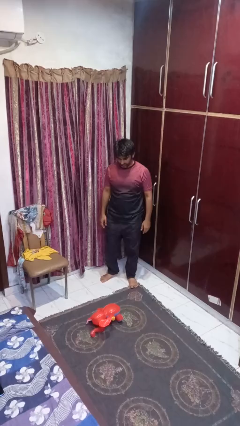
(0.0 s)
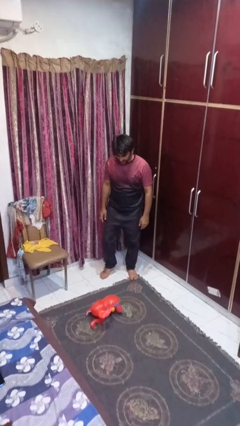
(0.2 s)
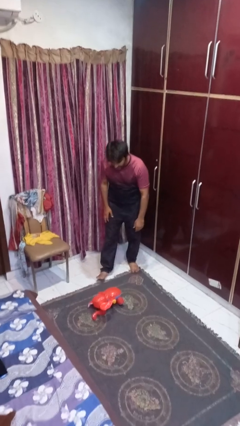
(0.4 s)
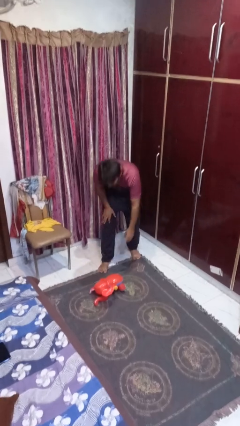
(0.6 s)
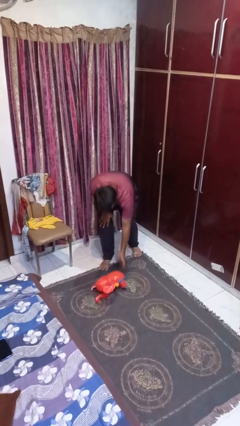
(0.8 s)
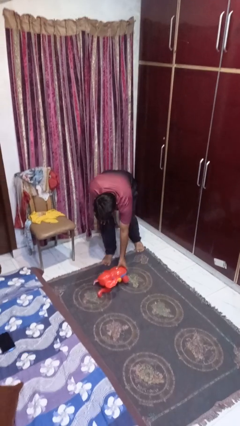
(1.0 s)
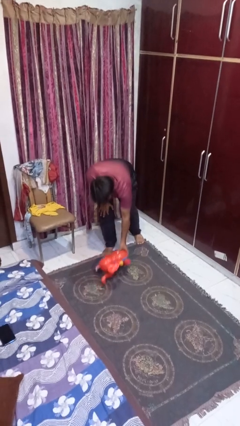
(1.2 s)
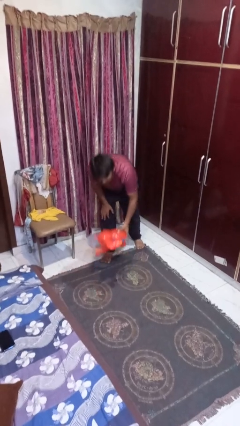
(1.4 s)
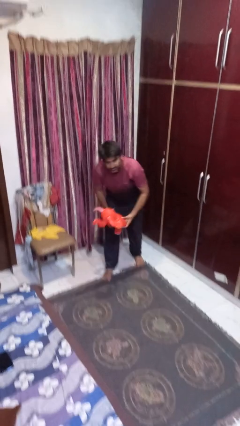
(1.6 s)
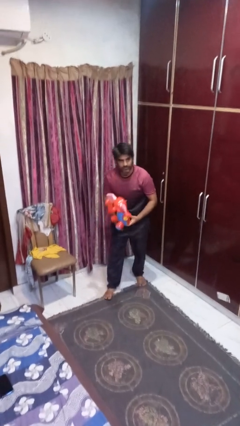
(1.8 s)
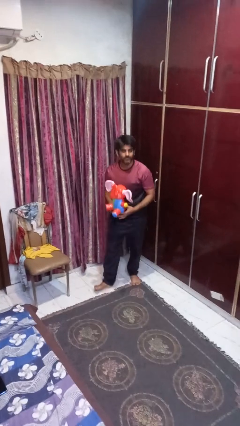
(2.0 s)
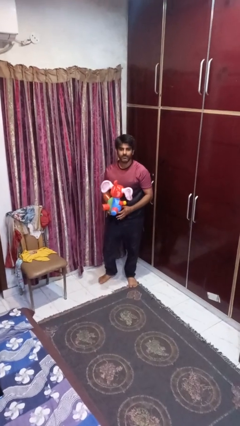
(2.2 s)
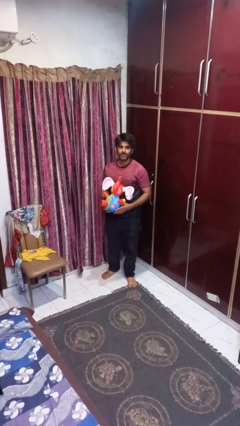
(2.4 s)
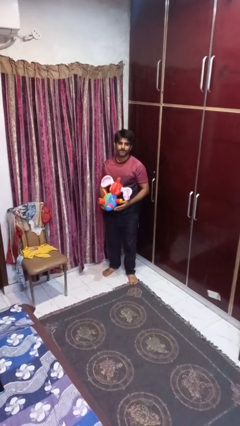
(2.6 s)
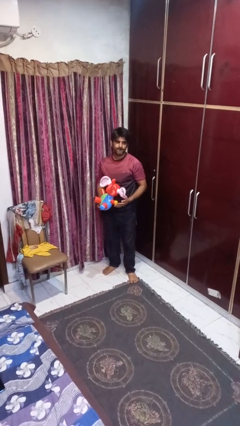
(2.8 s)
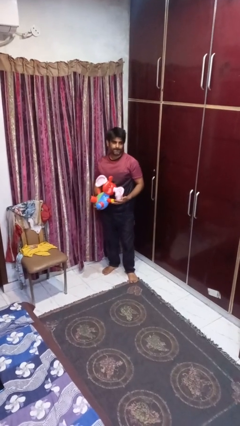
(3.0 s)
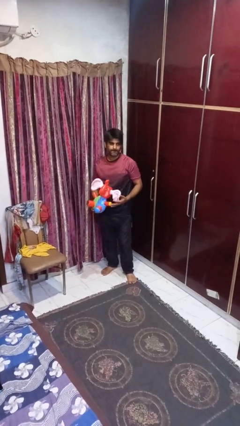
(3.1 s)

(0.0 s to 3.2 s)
person picks up object from floor

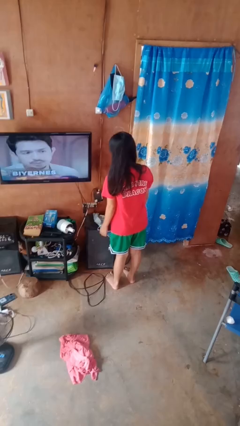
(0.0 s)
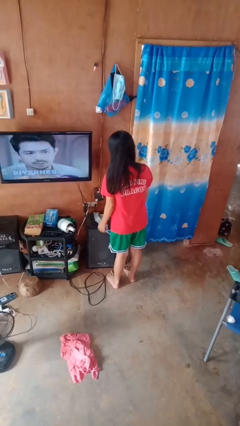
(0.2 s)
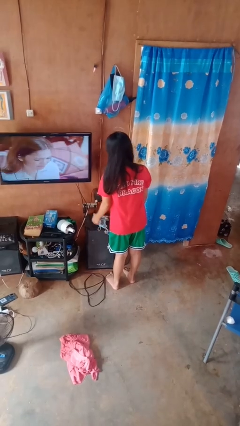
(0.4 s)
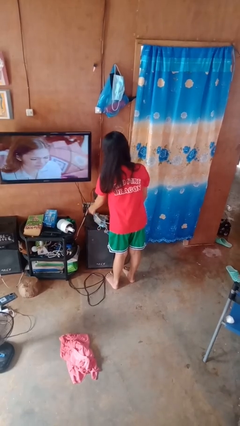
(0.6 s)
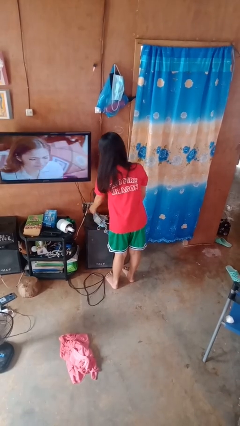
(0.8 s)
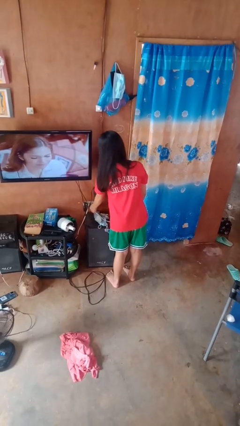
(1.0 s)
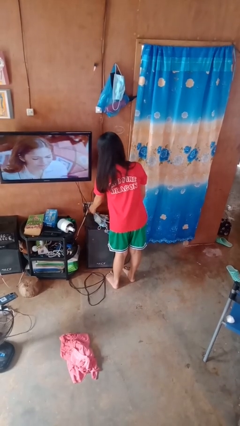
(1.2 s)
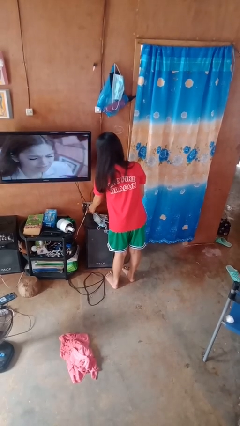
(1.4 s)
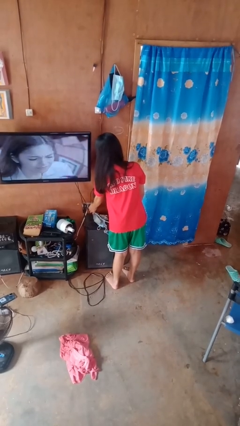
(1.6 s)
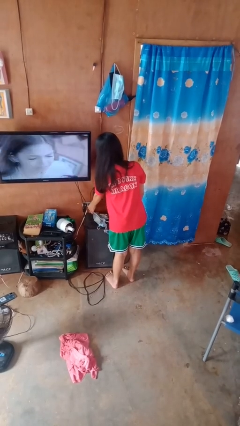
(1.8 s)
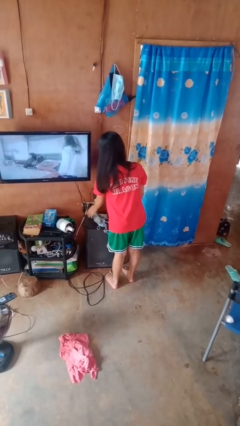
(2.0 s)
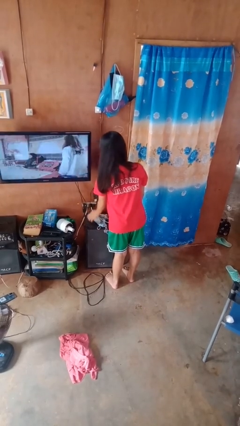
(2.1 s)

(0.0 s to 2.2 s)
person plugs into electrical socket

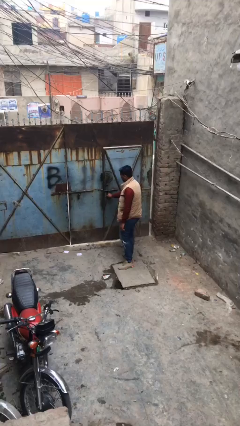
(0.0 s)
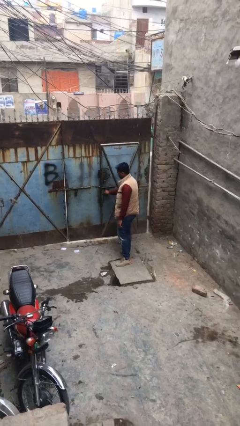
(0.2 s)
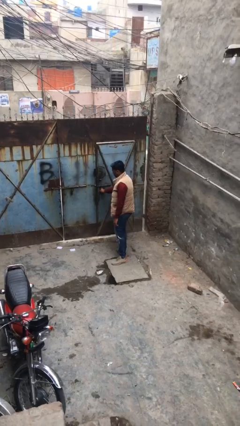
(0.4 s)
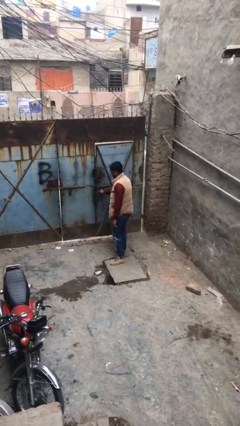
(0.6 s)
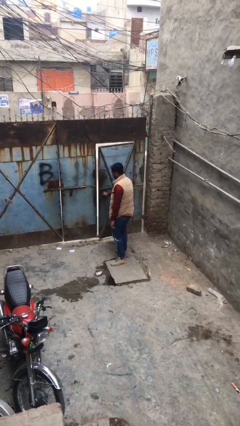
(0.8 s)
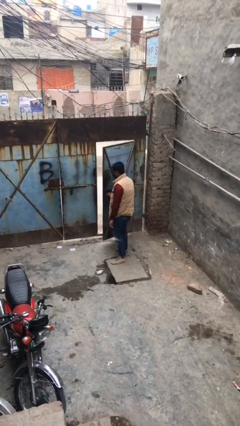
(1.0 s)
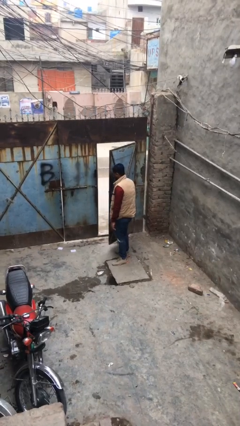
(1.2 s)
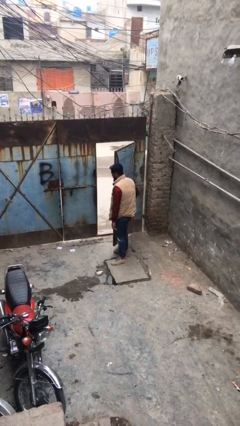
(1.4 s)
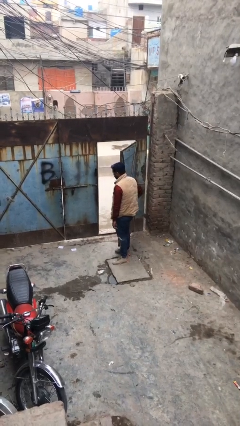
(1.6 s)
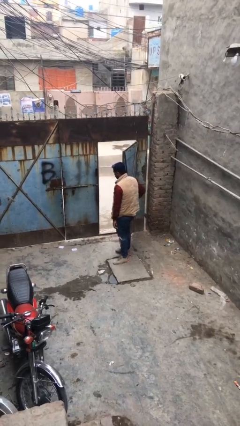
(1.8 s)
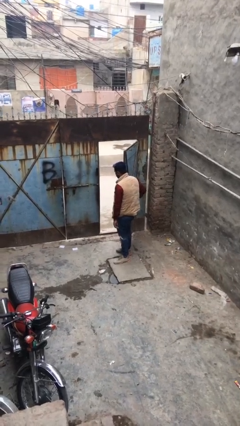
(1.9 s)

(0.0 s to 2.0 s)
person opens facility door

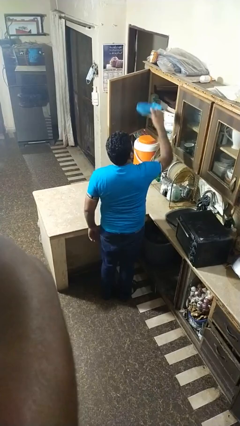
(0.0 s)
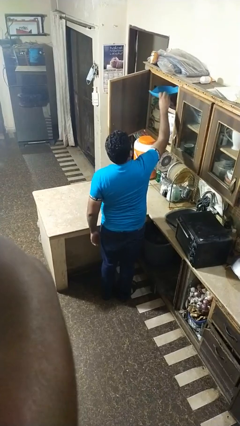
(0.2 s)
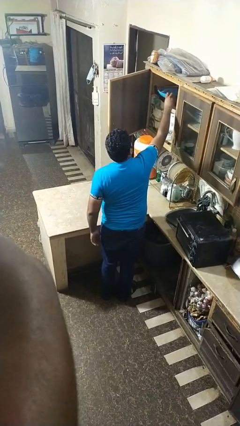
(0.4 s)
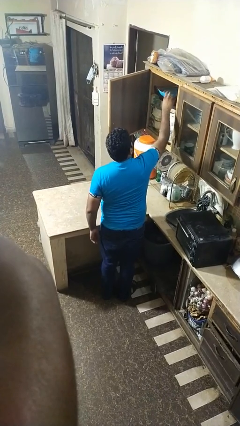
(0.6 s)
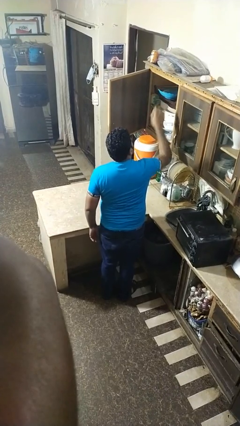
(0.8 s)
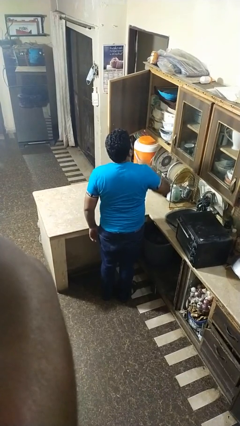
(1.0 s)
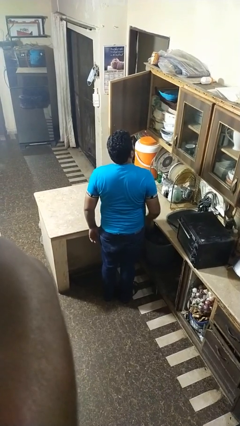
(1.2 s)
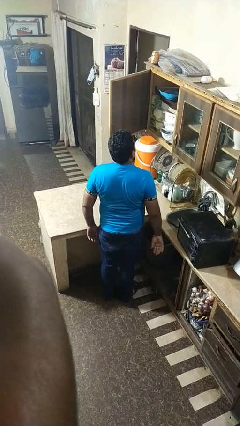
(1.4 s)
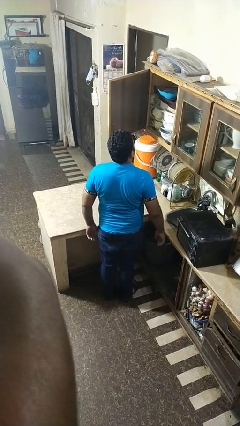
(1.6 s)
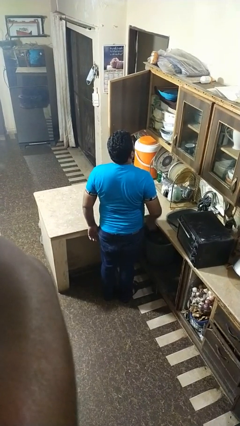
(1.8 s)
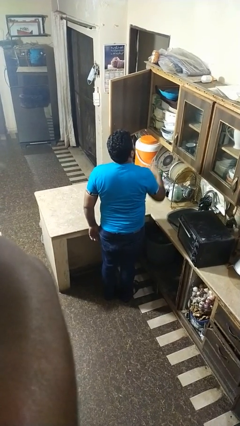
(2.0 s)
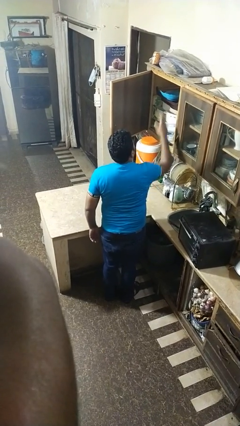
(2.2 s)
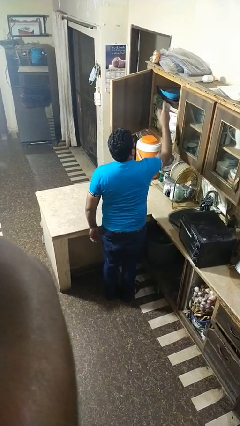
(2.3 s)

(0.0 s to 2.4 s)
person takes object from cabinet

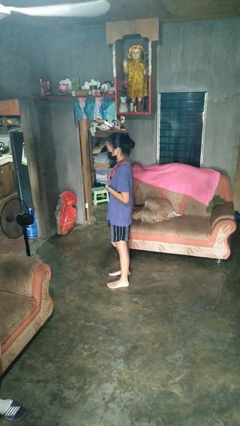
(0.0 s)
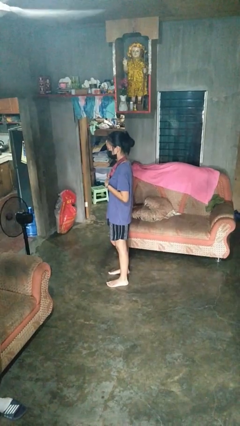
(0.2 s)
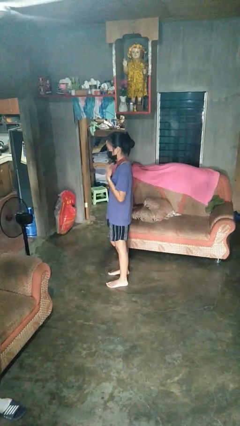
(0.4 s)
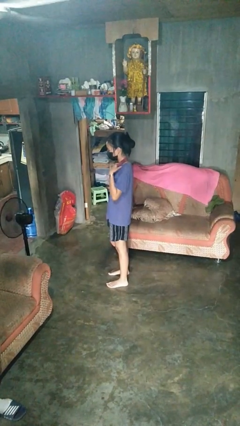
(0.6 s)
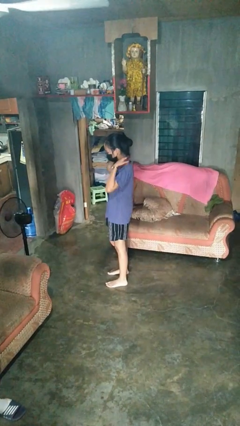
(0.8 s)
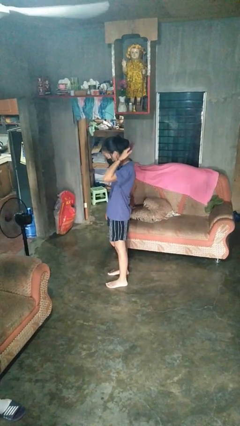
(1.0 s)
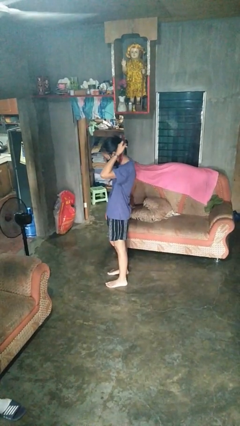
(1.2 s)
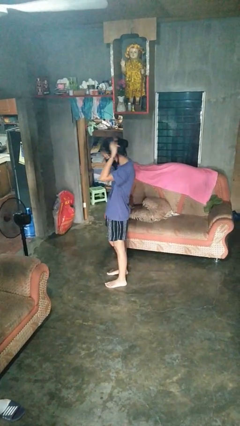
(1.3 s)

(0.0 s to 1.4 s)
person takes off necklace

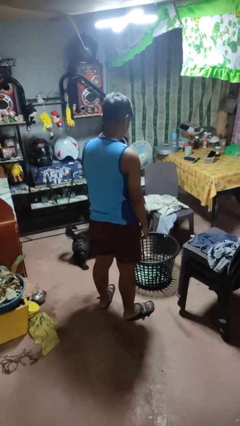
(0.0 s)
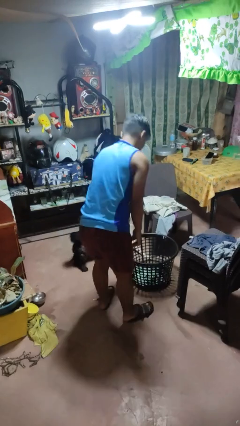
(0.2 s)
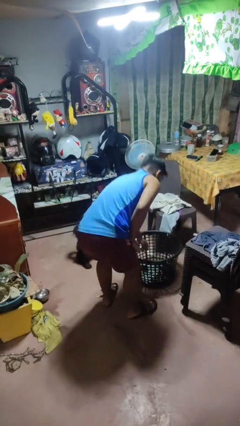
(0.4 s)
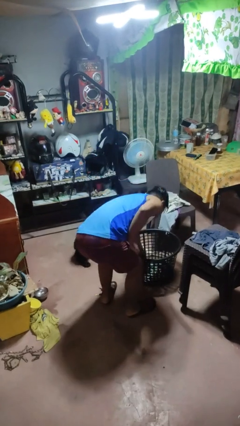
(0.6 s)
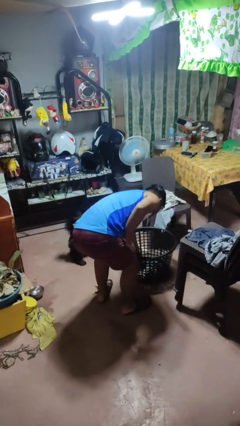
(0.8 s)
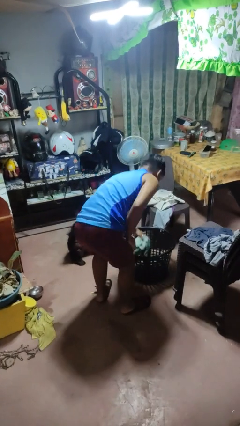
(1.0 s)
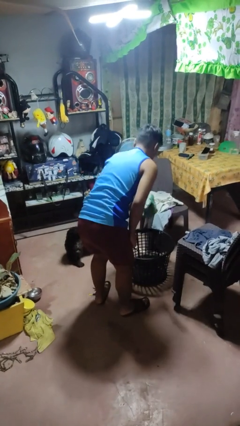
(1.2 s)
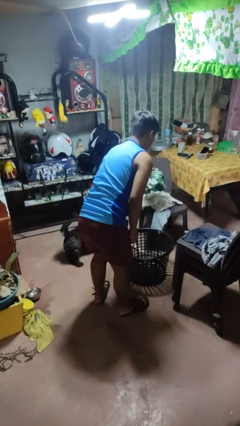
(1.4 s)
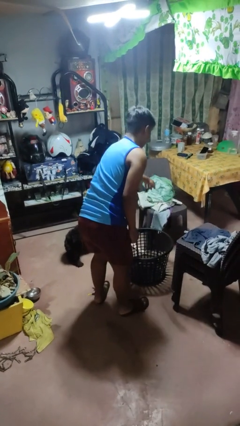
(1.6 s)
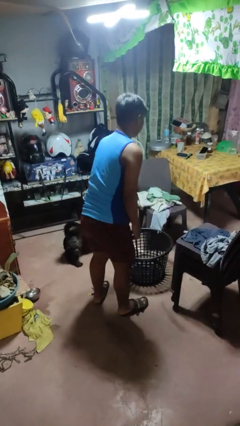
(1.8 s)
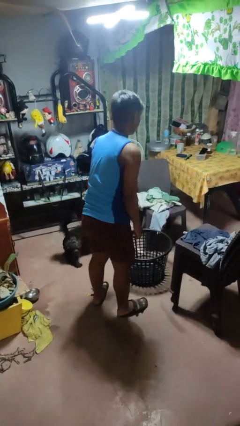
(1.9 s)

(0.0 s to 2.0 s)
person takes object from basket

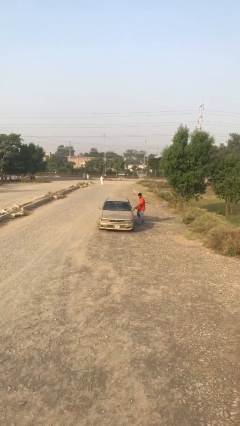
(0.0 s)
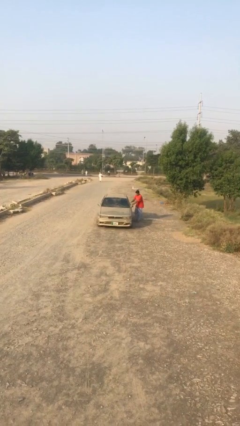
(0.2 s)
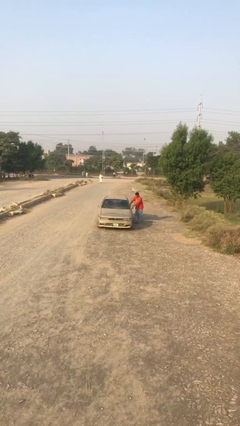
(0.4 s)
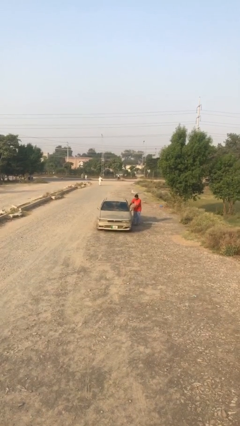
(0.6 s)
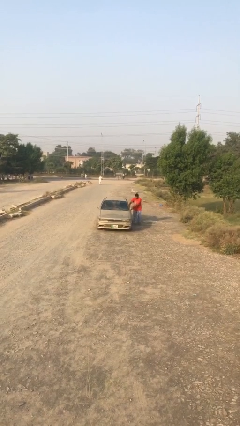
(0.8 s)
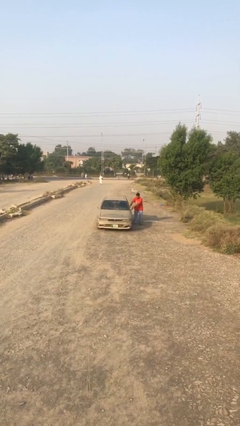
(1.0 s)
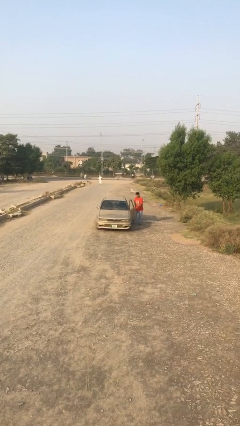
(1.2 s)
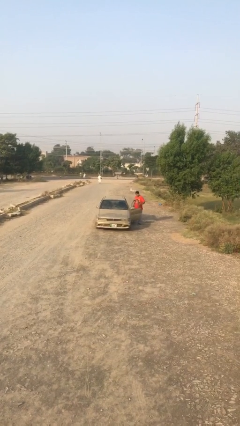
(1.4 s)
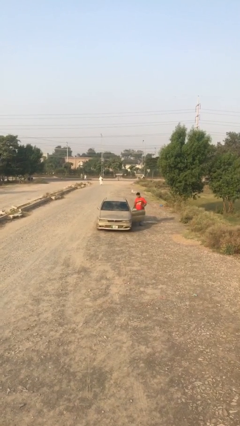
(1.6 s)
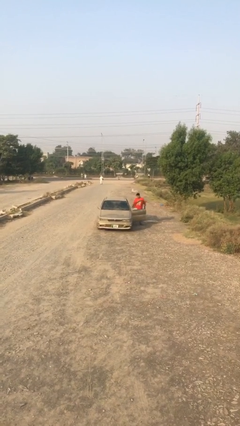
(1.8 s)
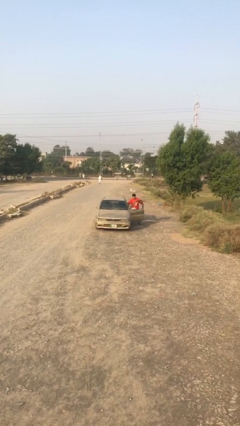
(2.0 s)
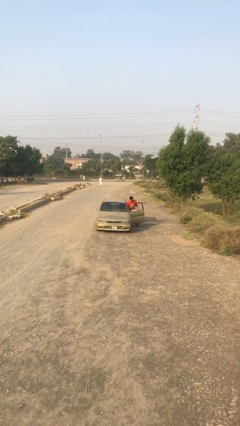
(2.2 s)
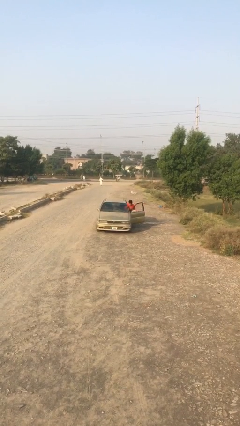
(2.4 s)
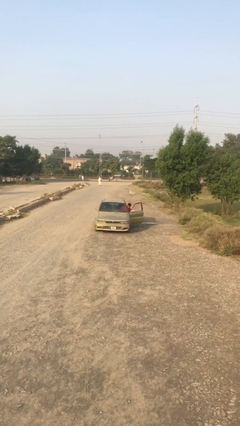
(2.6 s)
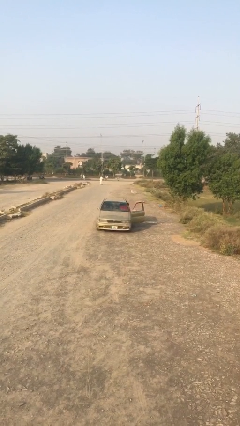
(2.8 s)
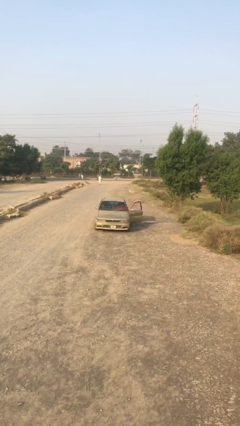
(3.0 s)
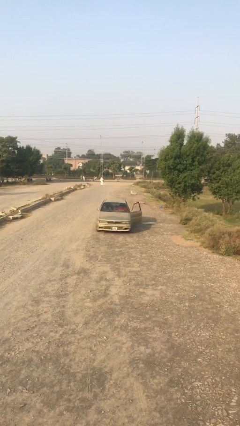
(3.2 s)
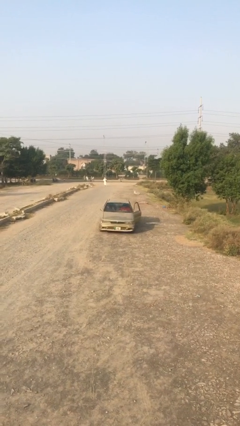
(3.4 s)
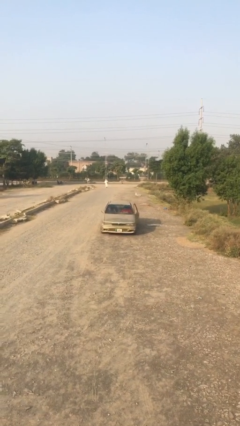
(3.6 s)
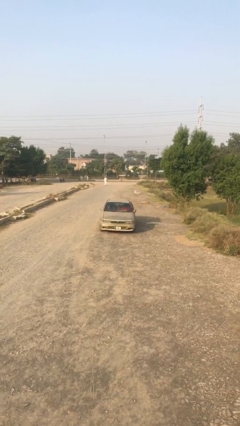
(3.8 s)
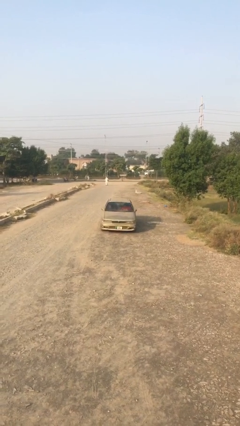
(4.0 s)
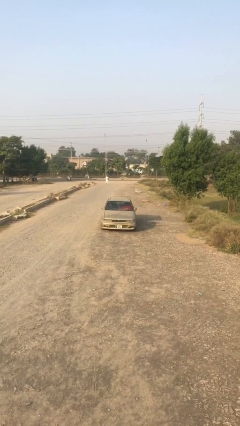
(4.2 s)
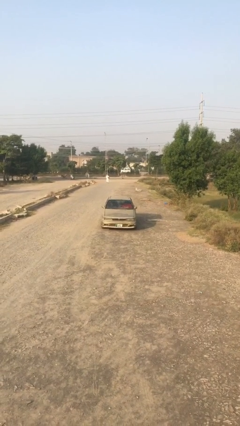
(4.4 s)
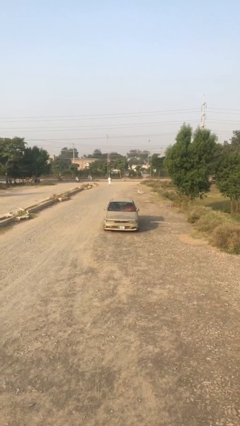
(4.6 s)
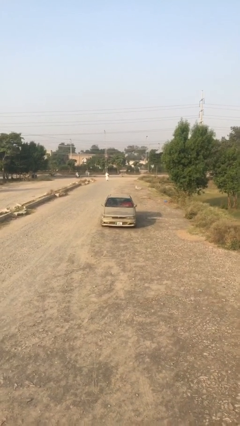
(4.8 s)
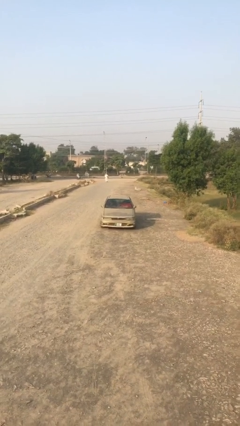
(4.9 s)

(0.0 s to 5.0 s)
car picks up person
